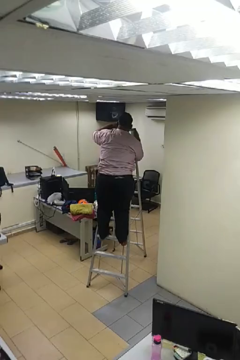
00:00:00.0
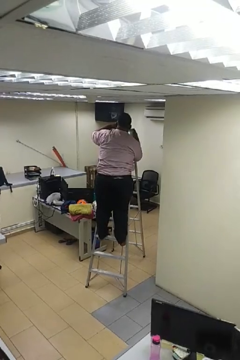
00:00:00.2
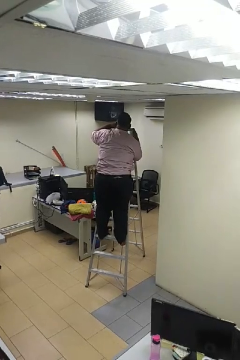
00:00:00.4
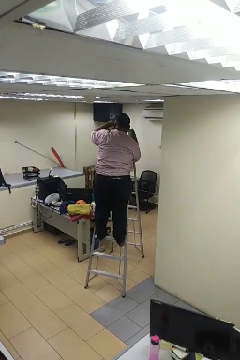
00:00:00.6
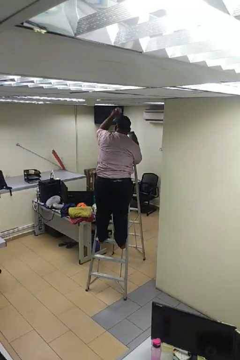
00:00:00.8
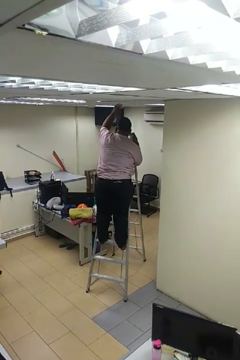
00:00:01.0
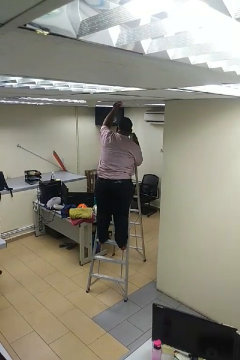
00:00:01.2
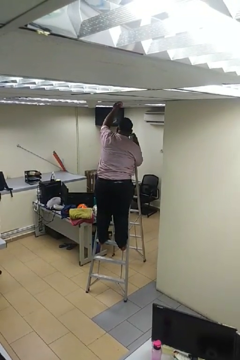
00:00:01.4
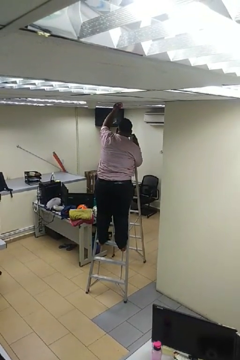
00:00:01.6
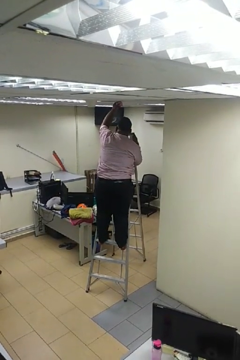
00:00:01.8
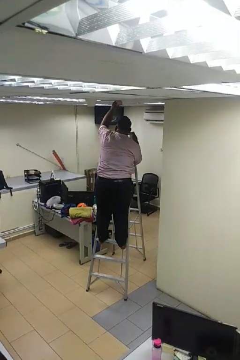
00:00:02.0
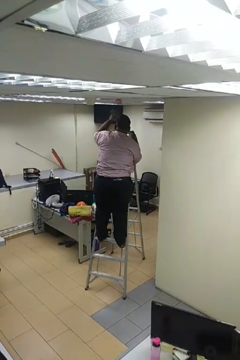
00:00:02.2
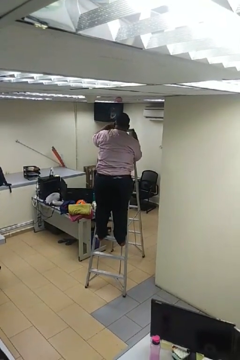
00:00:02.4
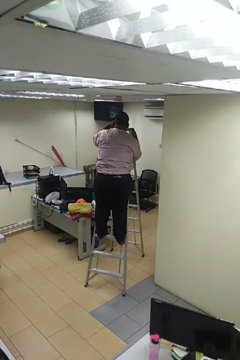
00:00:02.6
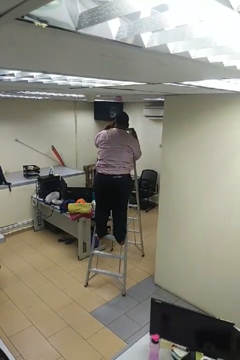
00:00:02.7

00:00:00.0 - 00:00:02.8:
person puts up smoke detector

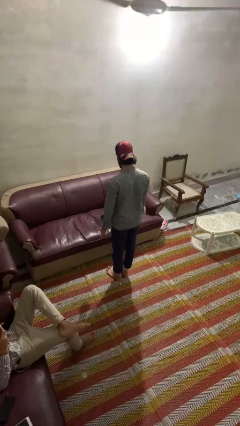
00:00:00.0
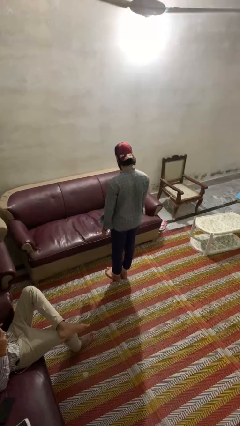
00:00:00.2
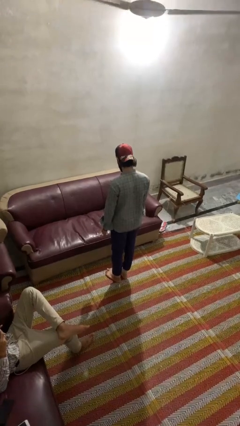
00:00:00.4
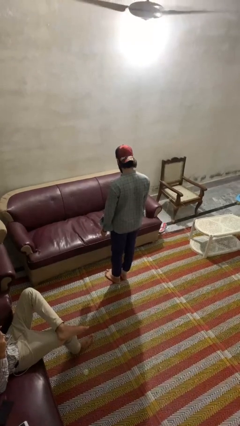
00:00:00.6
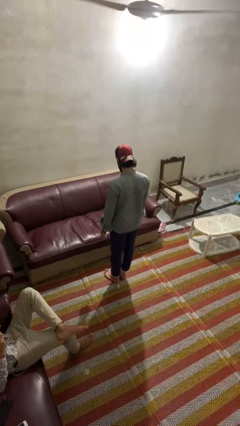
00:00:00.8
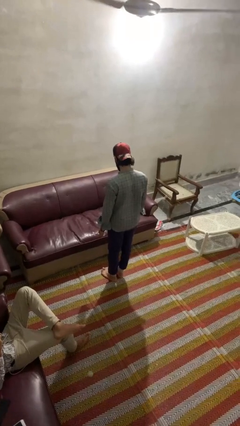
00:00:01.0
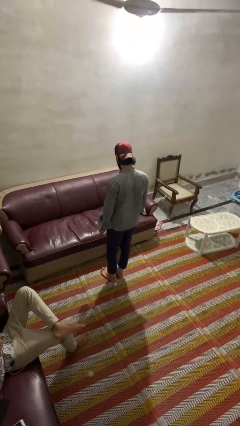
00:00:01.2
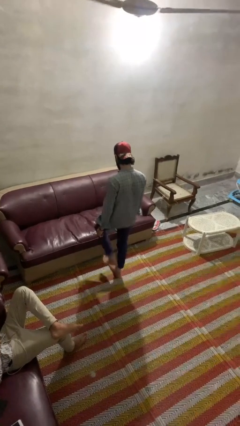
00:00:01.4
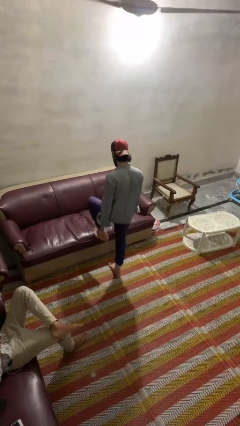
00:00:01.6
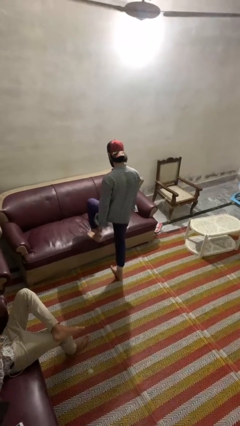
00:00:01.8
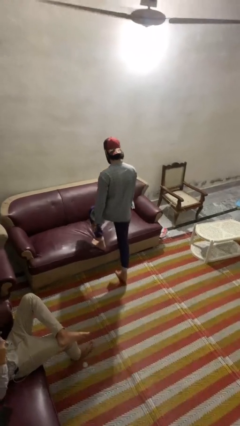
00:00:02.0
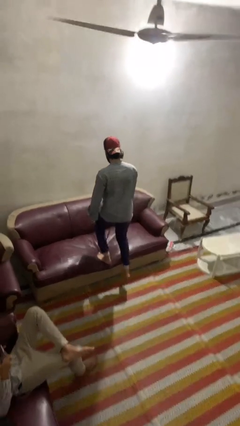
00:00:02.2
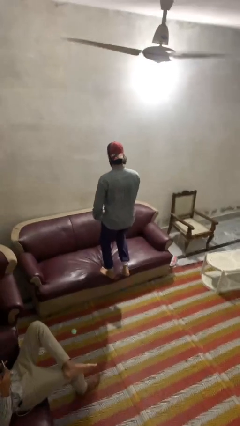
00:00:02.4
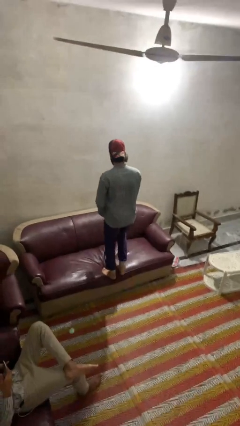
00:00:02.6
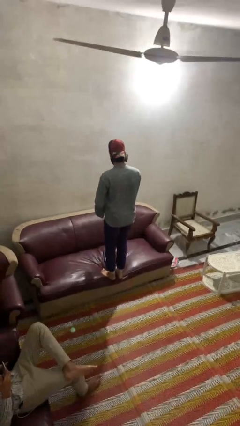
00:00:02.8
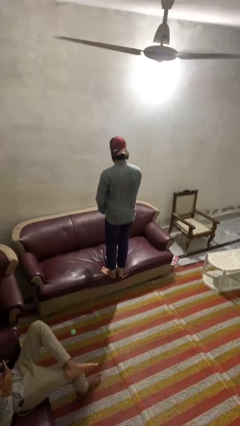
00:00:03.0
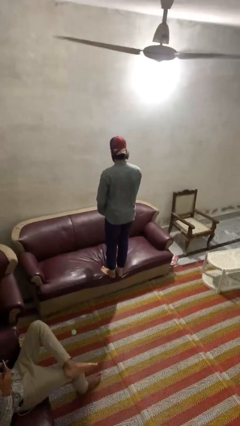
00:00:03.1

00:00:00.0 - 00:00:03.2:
person climbs on couch

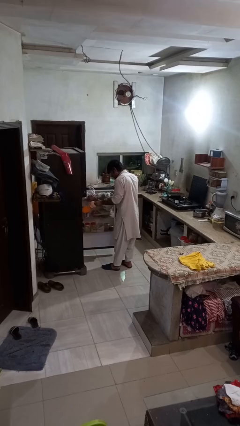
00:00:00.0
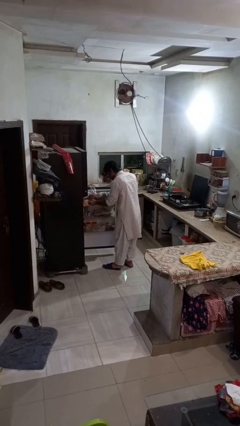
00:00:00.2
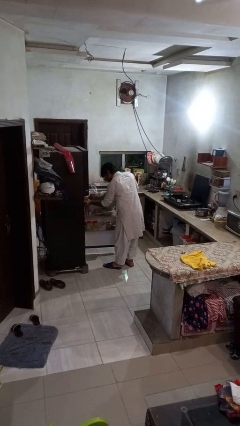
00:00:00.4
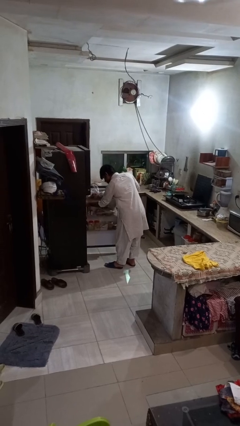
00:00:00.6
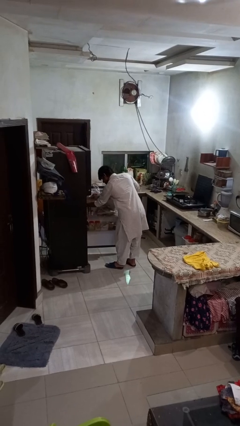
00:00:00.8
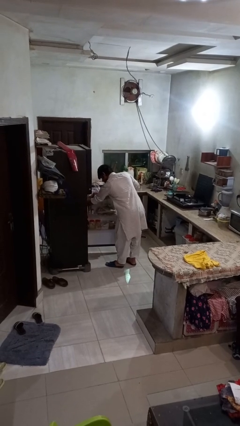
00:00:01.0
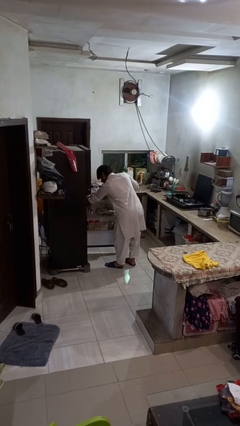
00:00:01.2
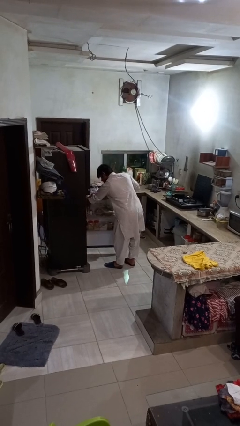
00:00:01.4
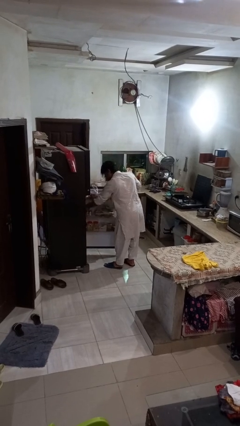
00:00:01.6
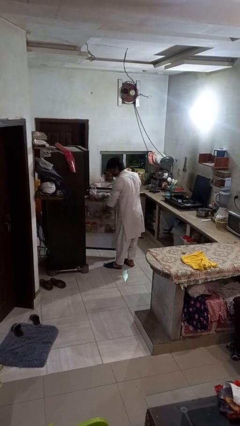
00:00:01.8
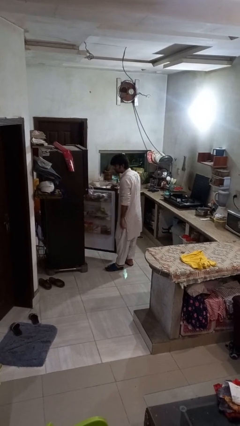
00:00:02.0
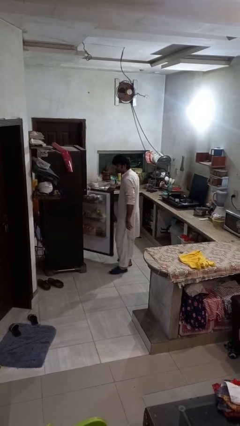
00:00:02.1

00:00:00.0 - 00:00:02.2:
person puts object into refrigerator

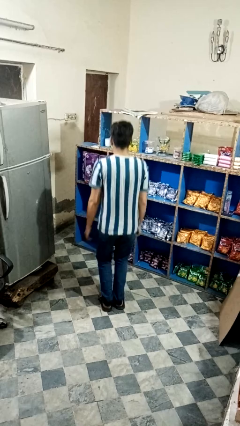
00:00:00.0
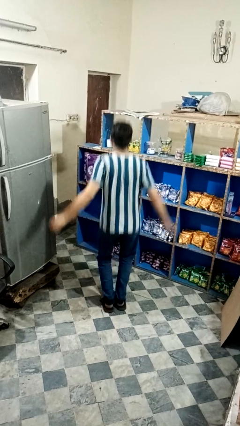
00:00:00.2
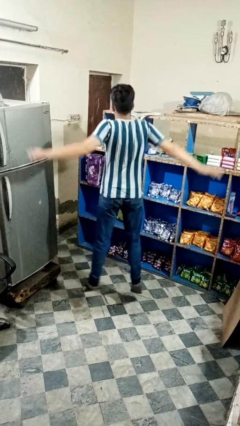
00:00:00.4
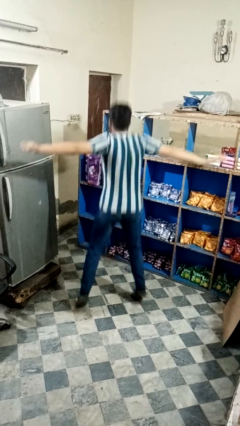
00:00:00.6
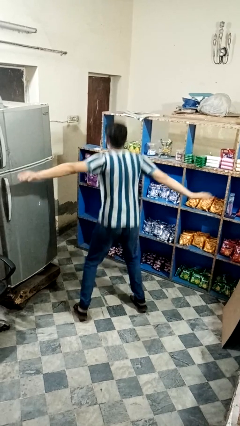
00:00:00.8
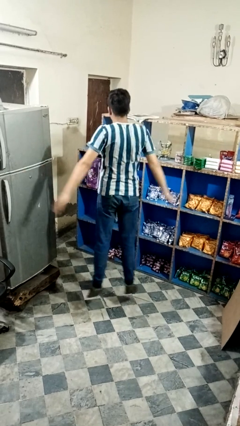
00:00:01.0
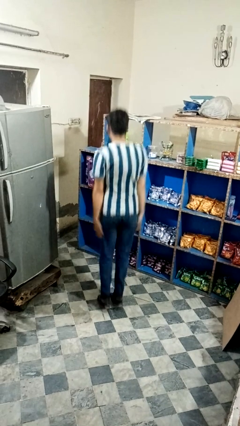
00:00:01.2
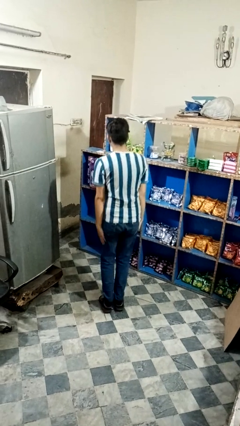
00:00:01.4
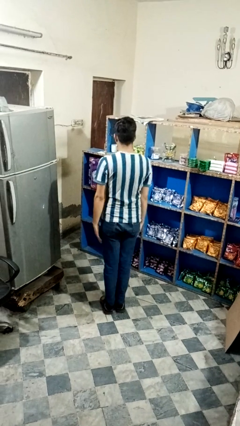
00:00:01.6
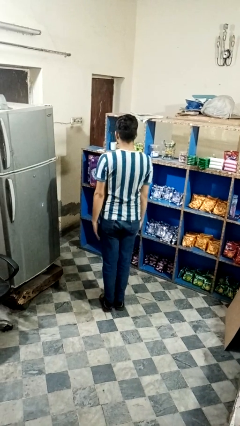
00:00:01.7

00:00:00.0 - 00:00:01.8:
person exercises with jumping jacks

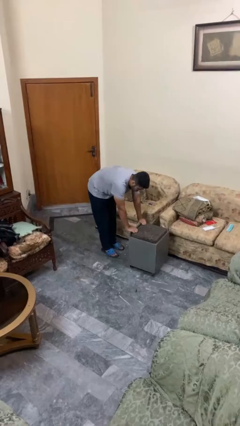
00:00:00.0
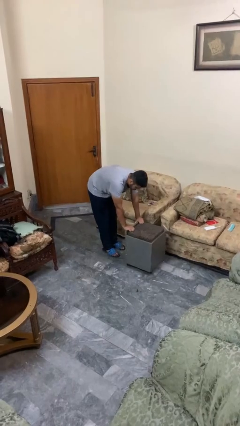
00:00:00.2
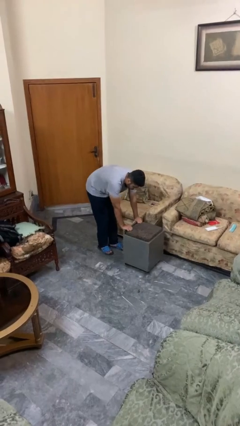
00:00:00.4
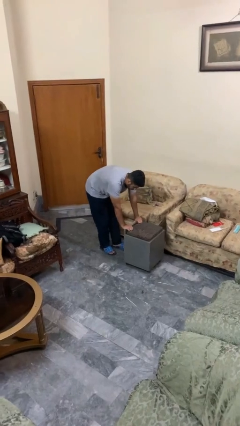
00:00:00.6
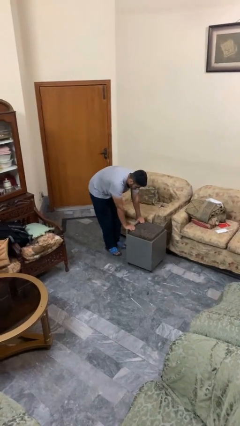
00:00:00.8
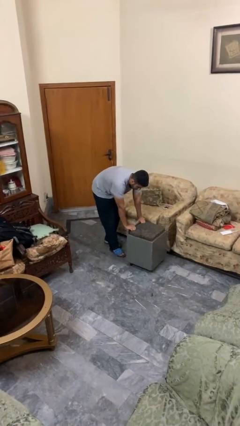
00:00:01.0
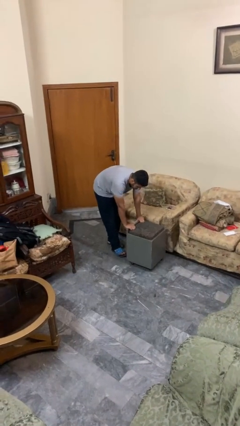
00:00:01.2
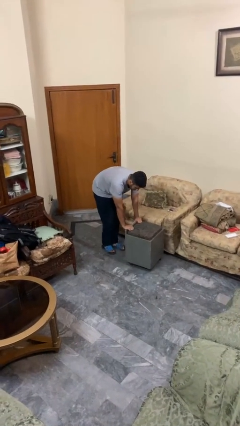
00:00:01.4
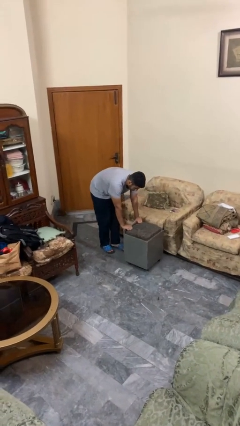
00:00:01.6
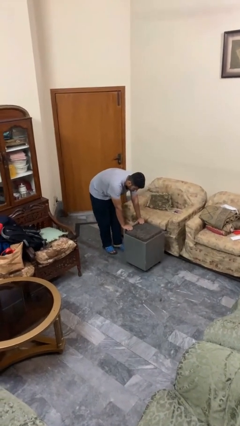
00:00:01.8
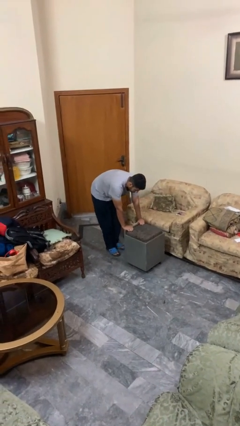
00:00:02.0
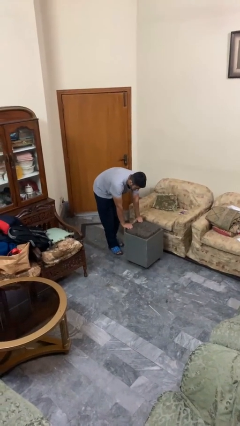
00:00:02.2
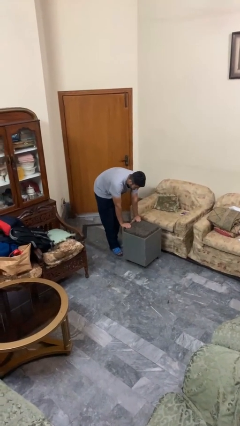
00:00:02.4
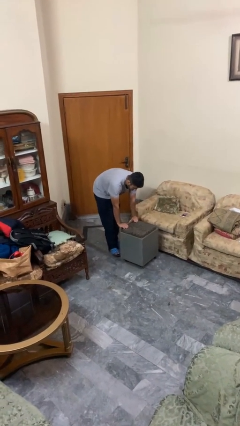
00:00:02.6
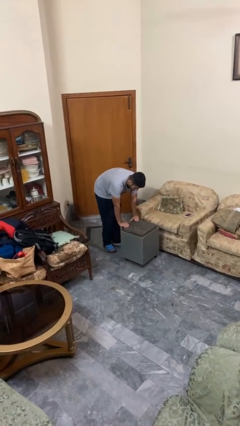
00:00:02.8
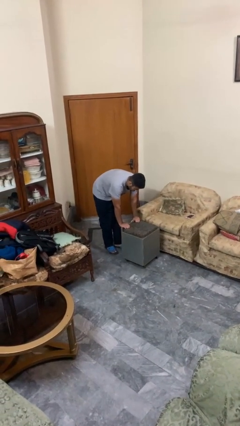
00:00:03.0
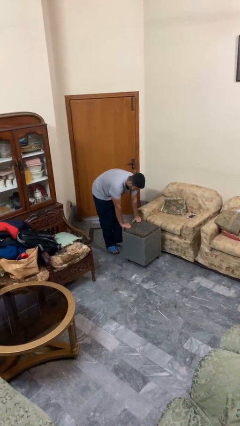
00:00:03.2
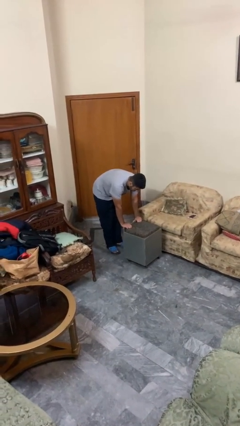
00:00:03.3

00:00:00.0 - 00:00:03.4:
person pulls wheeled cart

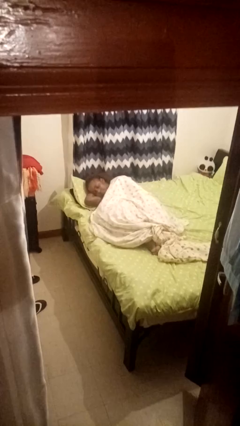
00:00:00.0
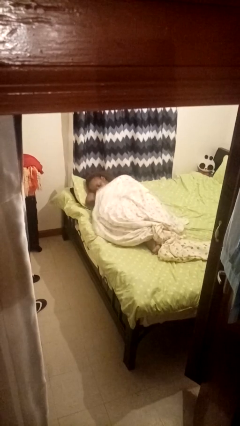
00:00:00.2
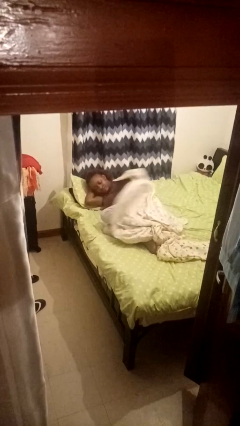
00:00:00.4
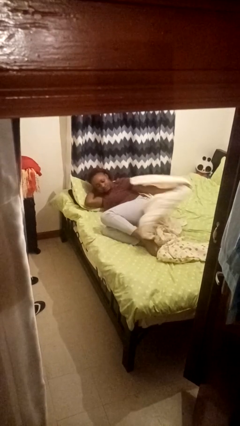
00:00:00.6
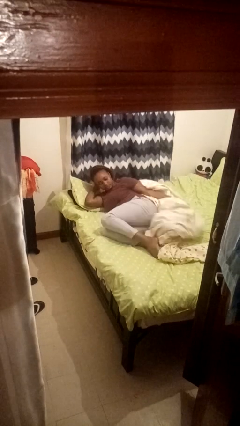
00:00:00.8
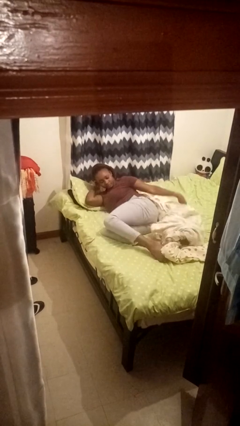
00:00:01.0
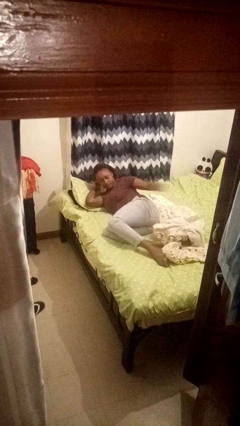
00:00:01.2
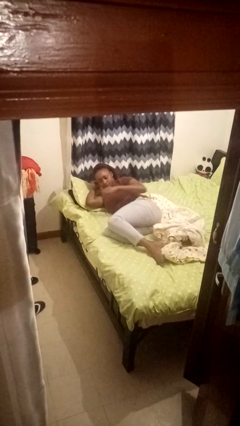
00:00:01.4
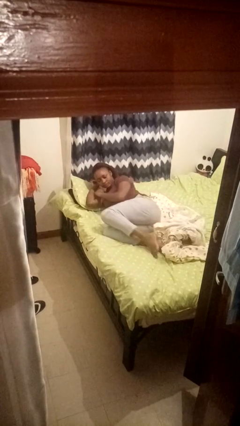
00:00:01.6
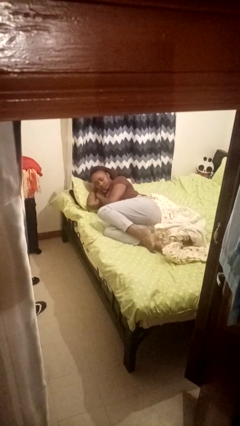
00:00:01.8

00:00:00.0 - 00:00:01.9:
person uncovers with bedsheets

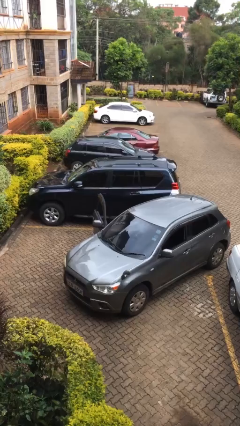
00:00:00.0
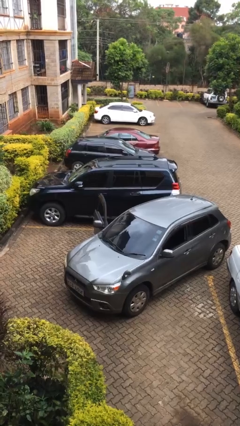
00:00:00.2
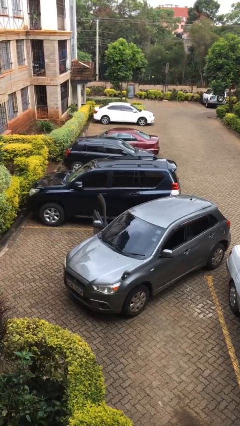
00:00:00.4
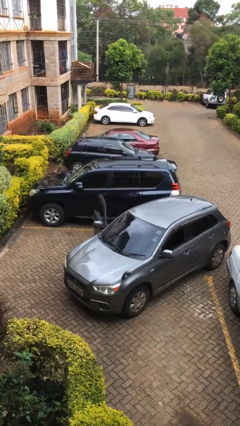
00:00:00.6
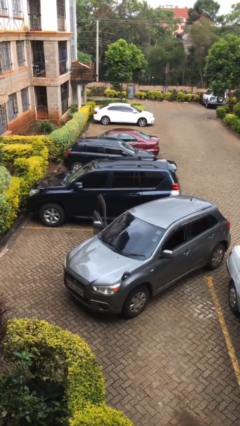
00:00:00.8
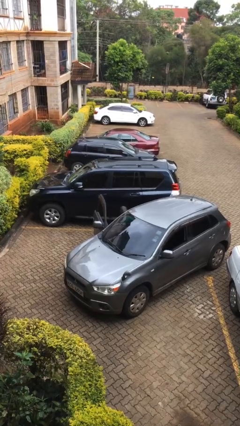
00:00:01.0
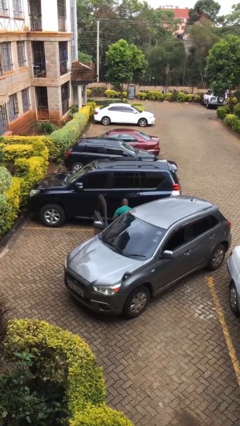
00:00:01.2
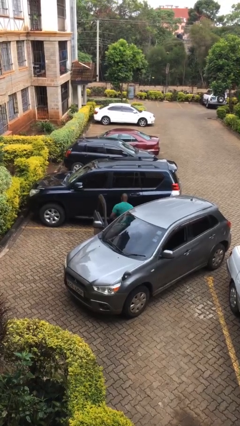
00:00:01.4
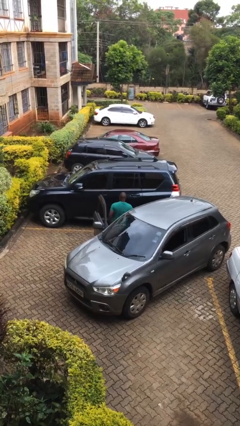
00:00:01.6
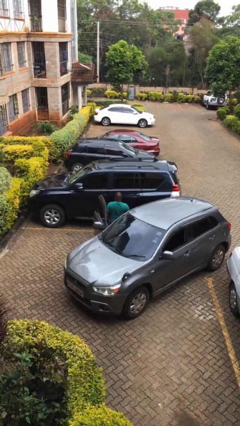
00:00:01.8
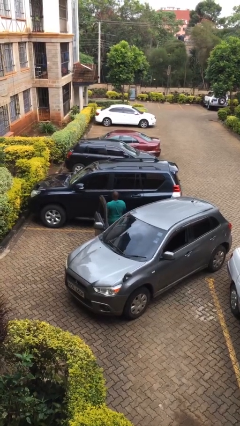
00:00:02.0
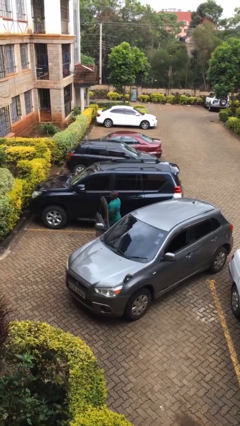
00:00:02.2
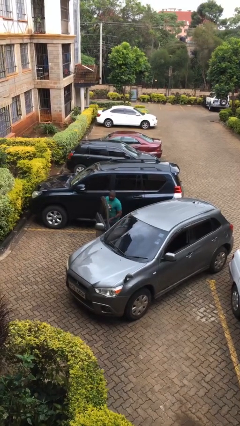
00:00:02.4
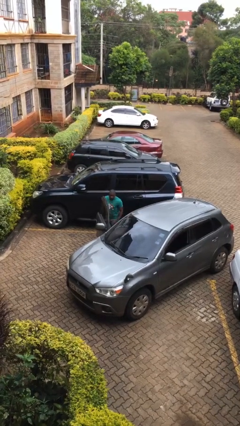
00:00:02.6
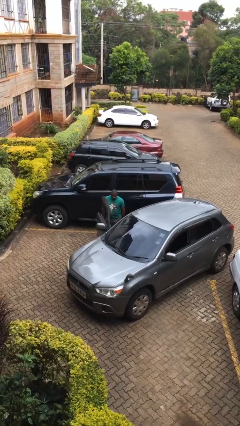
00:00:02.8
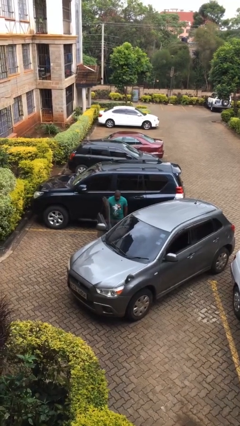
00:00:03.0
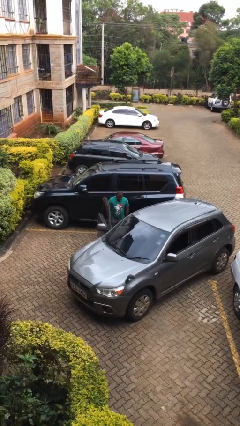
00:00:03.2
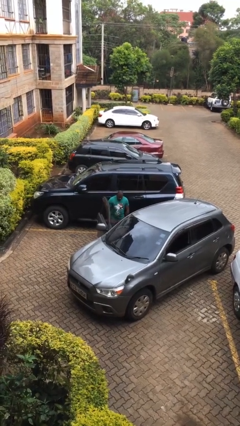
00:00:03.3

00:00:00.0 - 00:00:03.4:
person exits car
